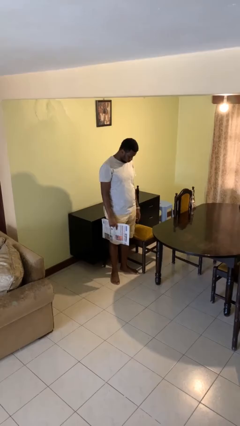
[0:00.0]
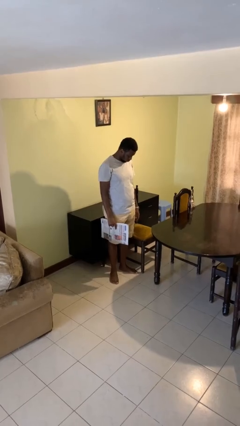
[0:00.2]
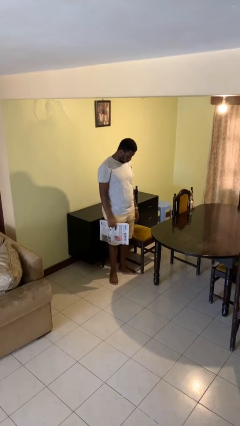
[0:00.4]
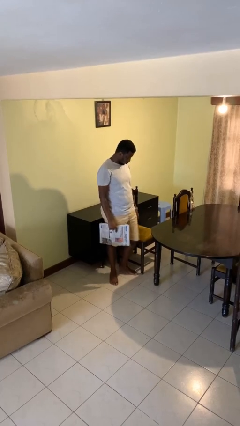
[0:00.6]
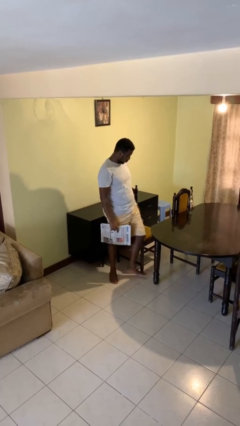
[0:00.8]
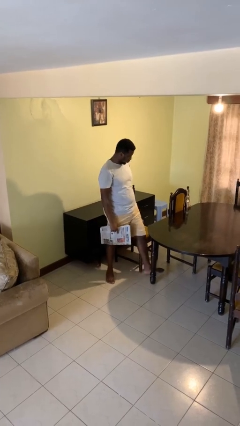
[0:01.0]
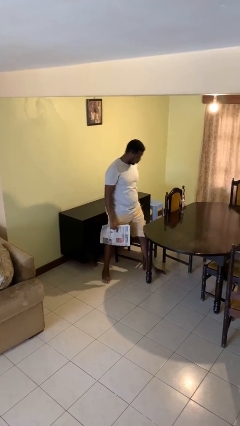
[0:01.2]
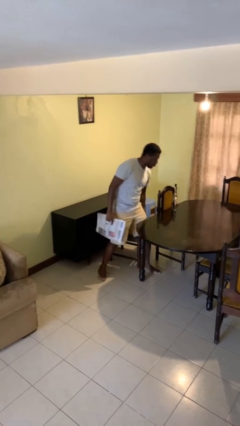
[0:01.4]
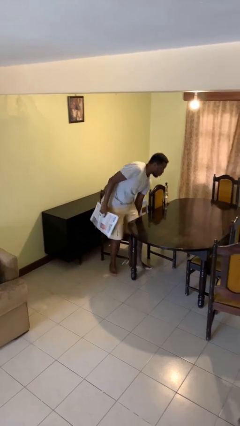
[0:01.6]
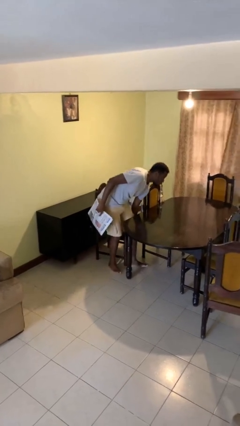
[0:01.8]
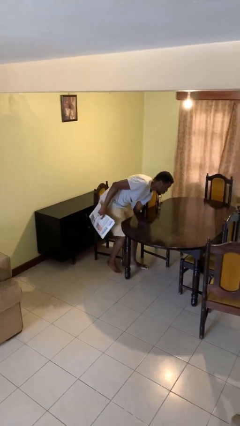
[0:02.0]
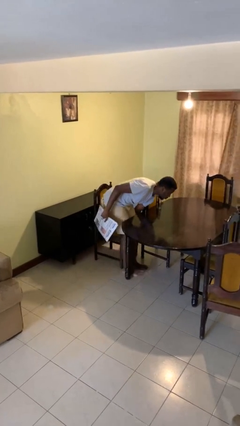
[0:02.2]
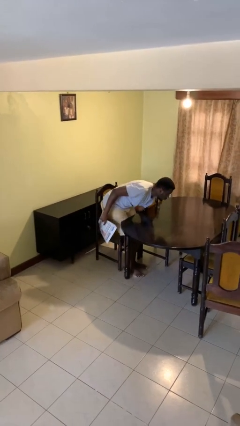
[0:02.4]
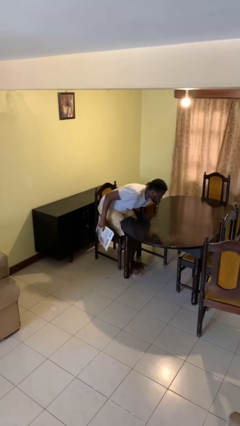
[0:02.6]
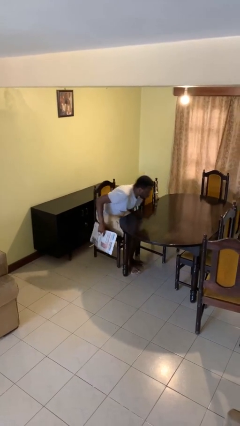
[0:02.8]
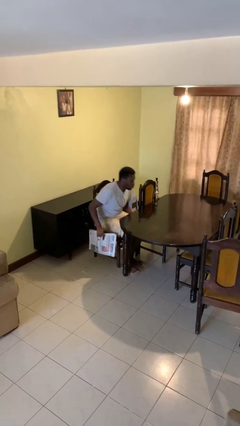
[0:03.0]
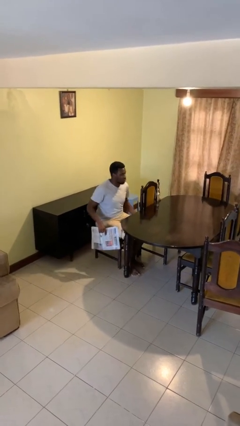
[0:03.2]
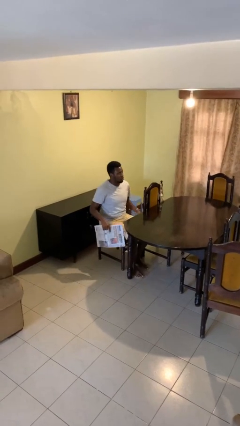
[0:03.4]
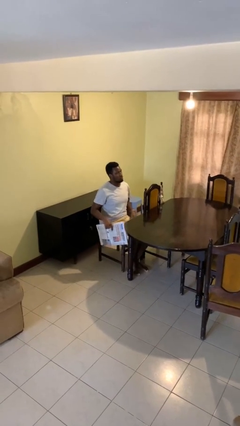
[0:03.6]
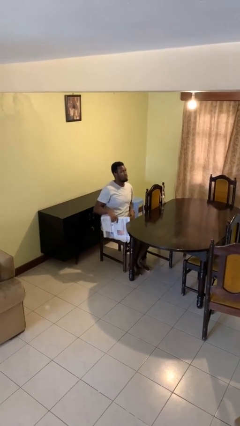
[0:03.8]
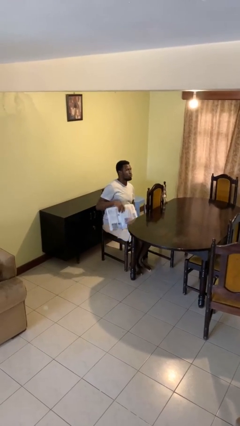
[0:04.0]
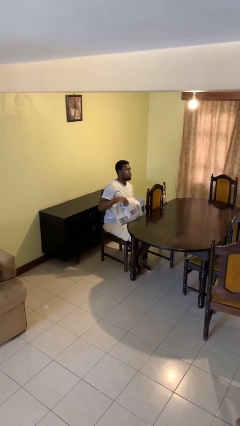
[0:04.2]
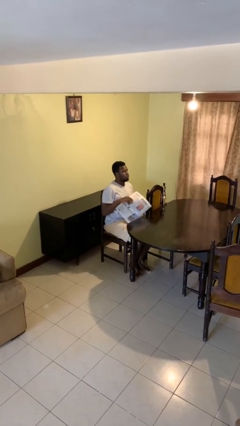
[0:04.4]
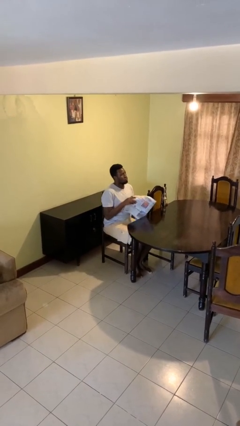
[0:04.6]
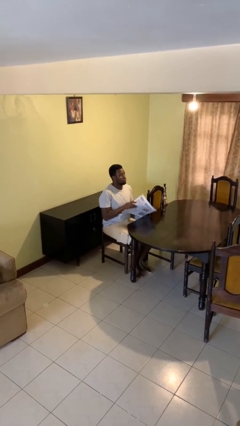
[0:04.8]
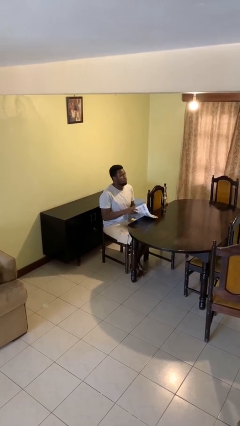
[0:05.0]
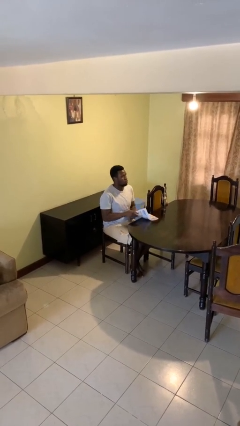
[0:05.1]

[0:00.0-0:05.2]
person sits down

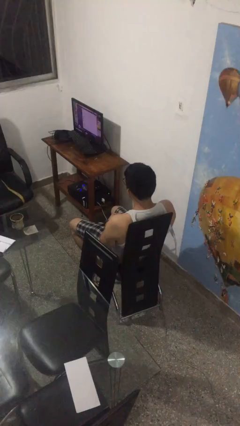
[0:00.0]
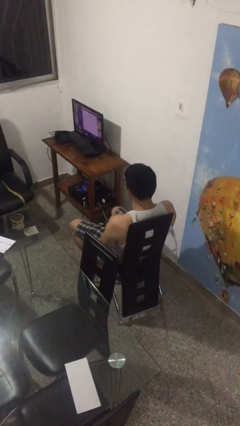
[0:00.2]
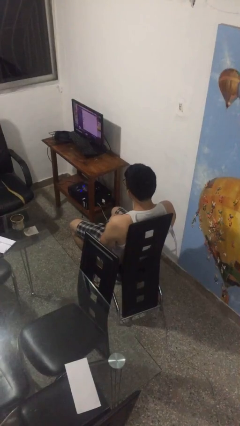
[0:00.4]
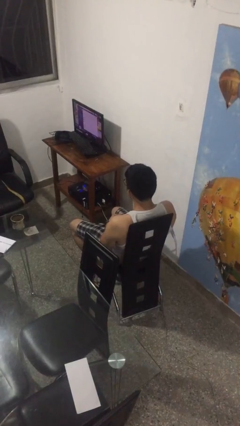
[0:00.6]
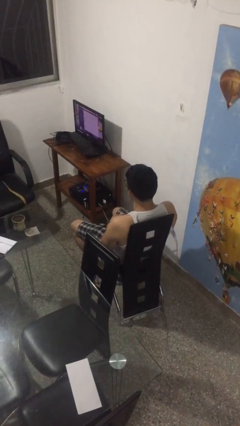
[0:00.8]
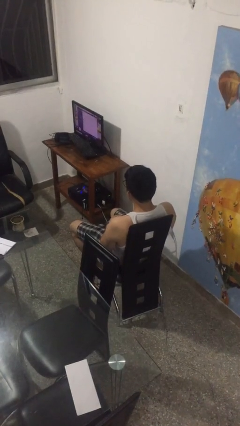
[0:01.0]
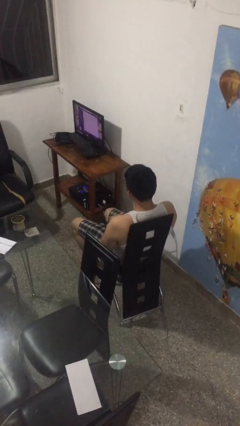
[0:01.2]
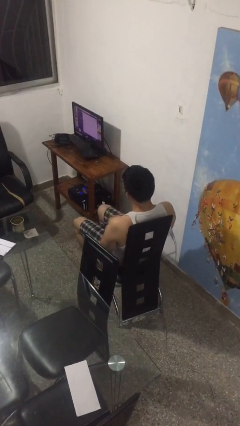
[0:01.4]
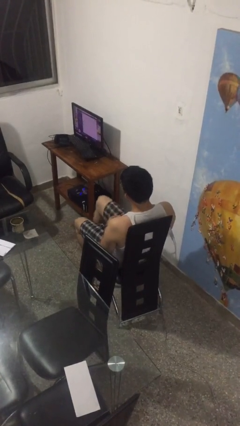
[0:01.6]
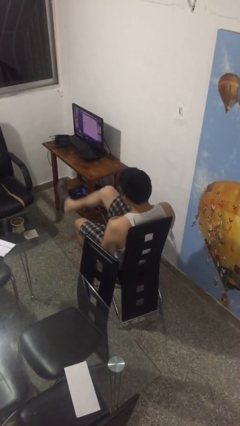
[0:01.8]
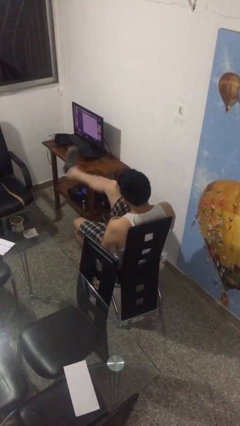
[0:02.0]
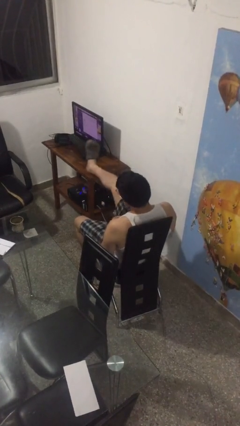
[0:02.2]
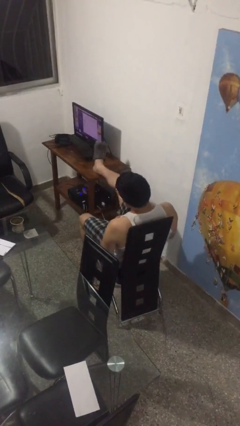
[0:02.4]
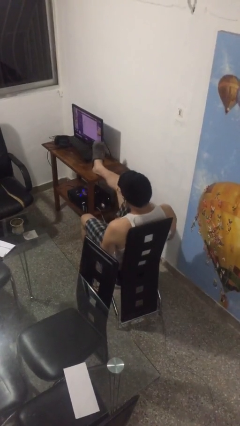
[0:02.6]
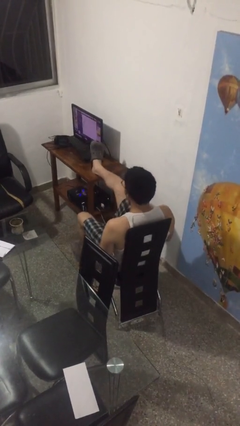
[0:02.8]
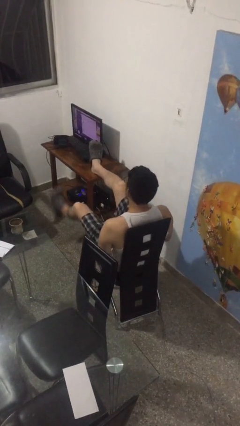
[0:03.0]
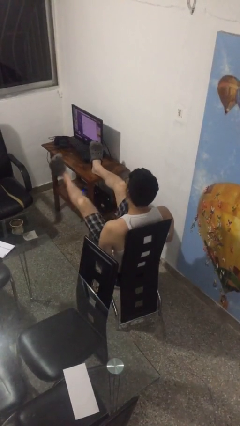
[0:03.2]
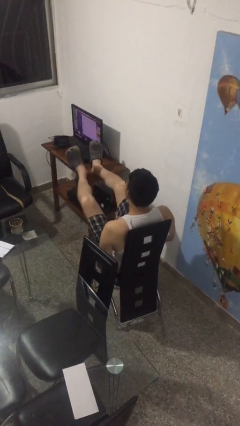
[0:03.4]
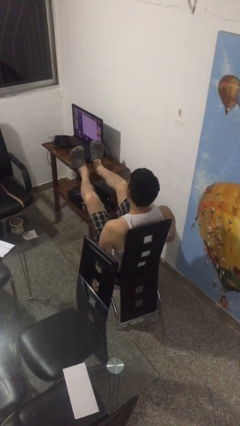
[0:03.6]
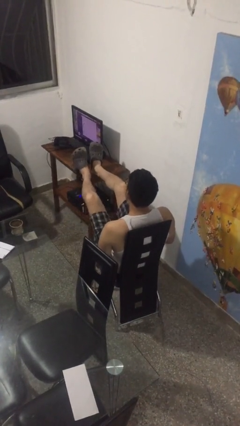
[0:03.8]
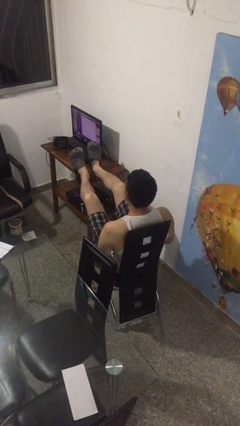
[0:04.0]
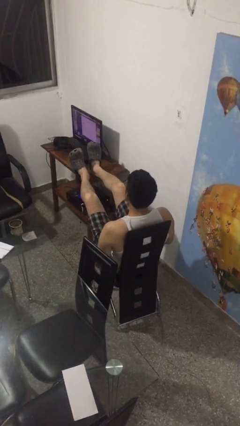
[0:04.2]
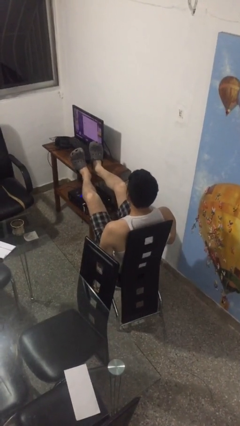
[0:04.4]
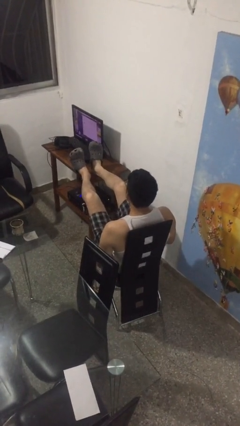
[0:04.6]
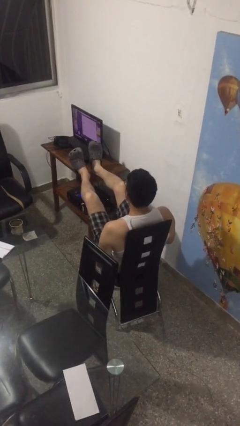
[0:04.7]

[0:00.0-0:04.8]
person puts feet up

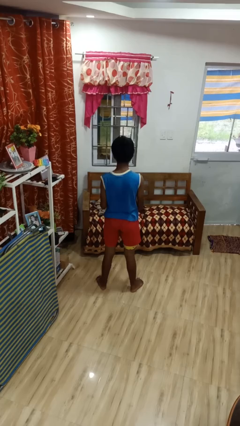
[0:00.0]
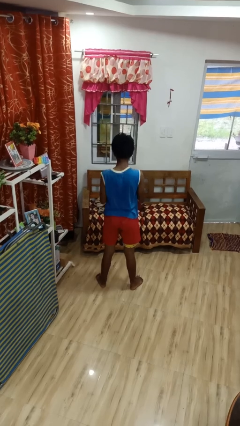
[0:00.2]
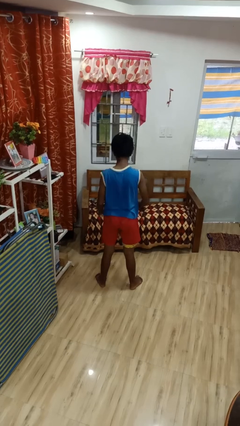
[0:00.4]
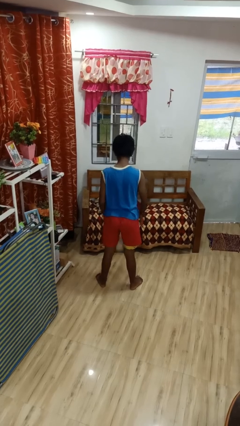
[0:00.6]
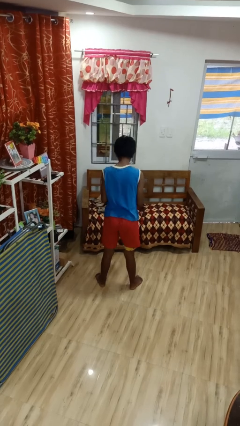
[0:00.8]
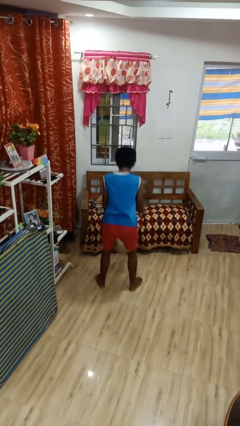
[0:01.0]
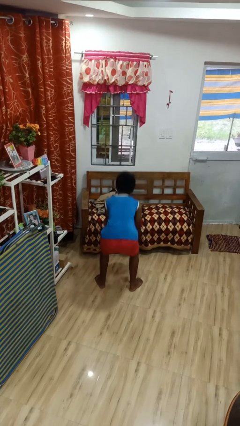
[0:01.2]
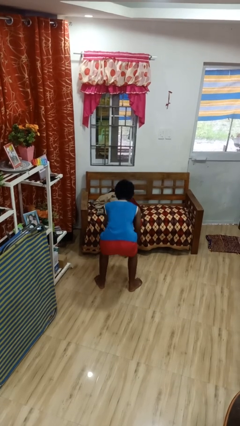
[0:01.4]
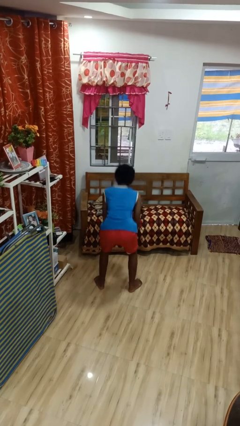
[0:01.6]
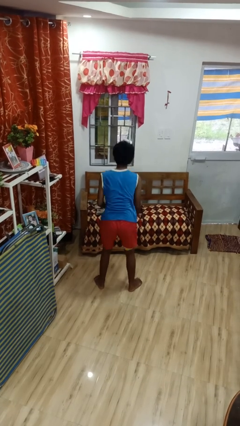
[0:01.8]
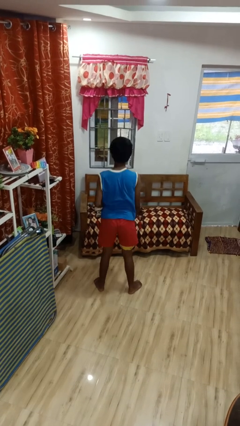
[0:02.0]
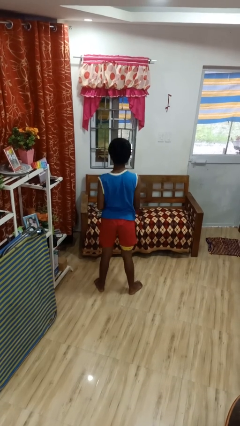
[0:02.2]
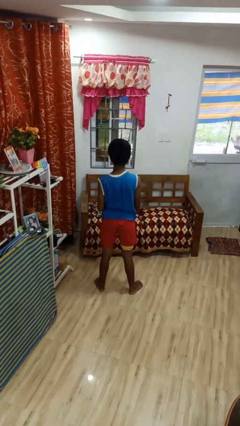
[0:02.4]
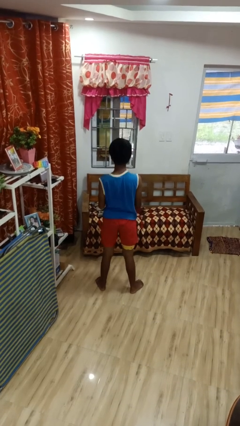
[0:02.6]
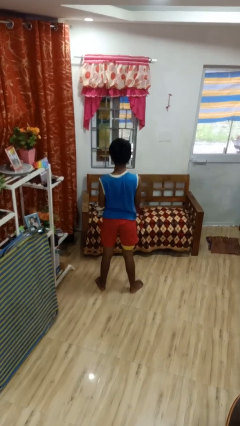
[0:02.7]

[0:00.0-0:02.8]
person bounces ball on floor

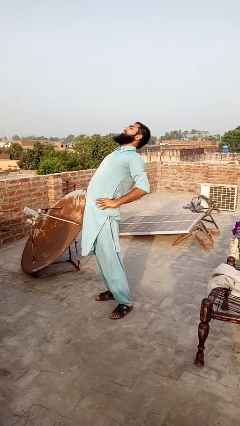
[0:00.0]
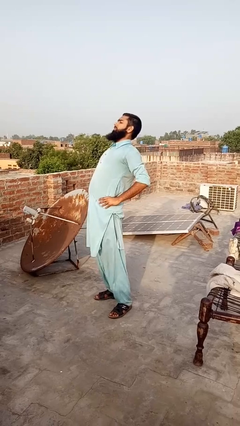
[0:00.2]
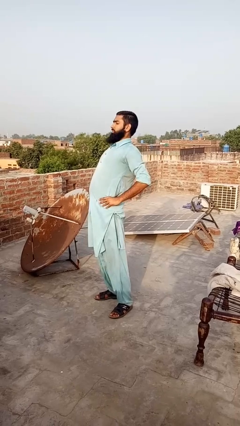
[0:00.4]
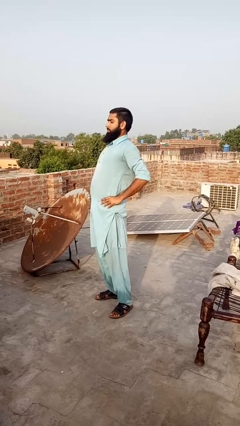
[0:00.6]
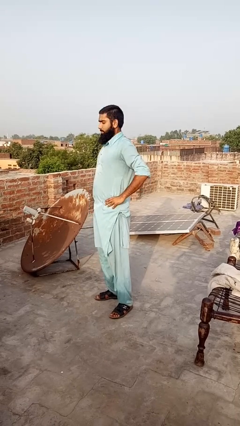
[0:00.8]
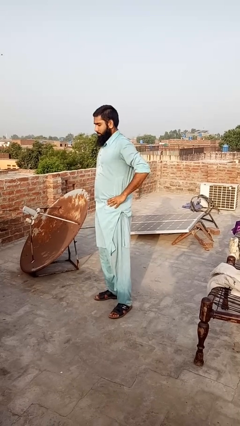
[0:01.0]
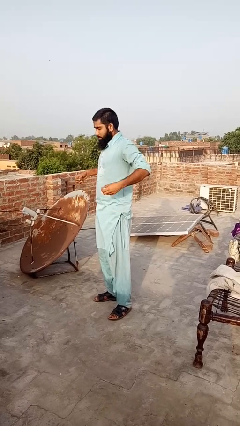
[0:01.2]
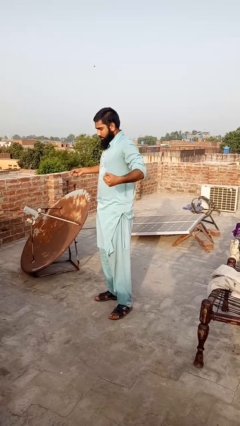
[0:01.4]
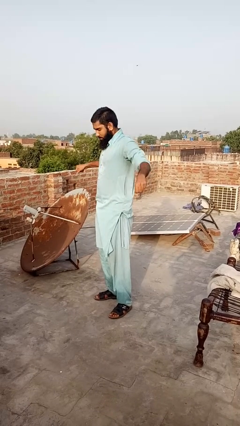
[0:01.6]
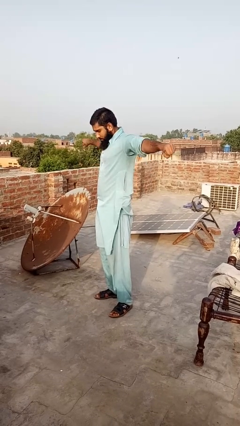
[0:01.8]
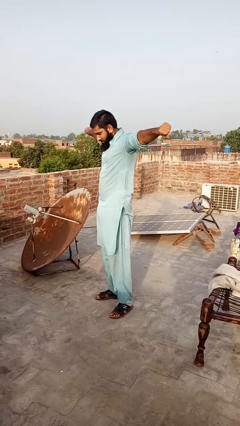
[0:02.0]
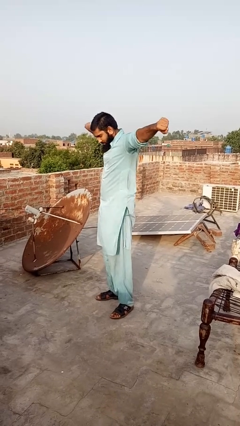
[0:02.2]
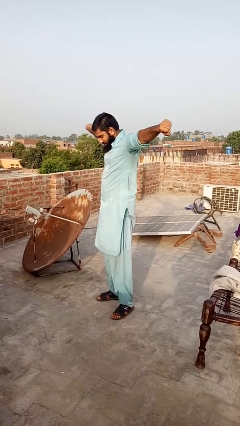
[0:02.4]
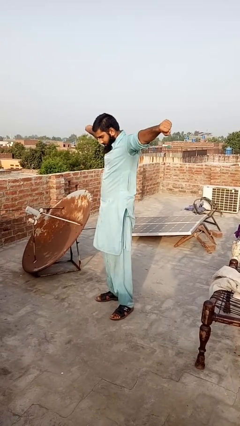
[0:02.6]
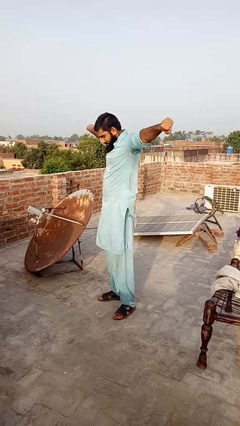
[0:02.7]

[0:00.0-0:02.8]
person stretches arms to side

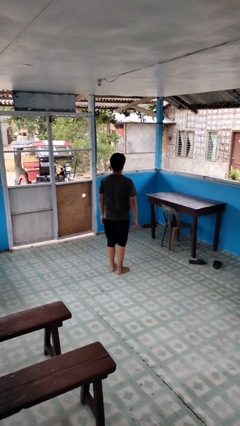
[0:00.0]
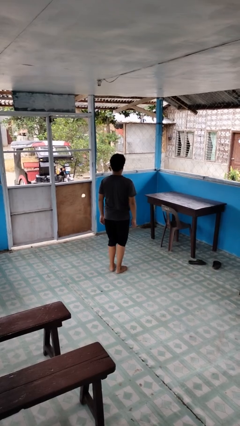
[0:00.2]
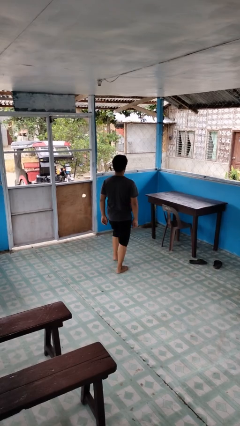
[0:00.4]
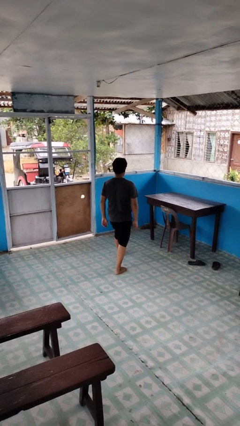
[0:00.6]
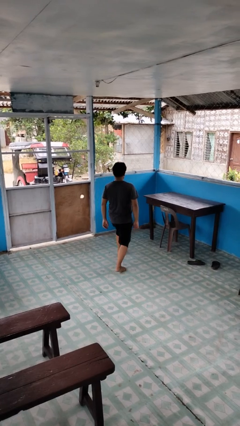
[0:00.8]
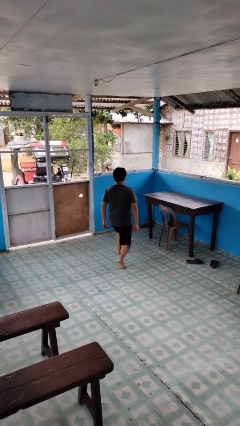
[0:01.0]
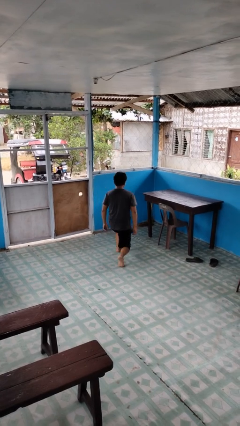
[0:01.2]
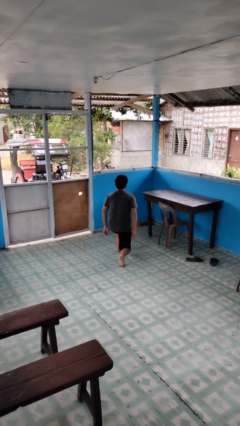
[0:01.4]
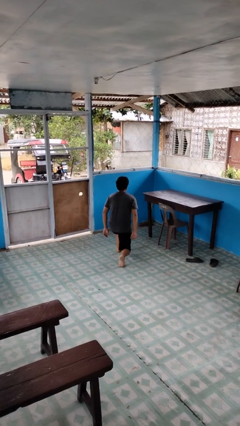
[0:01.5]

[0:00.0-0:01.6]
person exercises with lunges

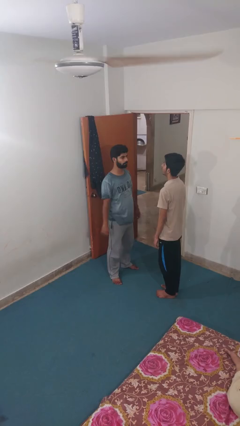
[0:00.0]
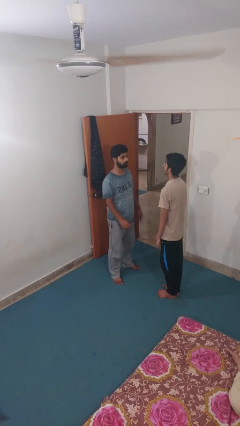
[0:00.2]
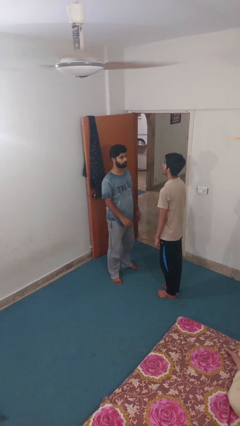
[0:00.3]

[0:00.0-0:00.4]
person grabs person by hair
